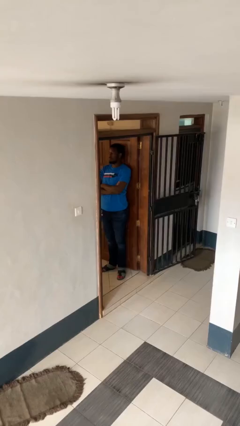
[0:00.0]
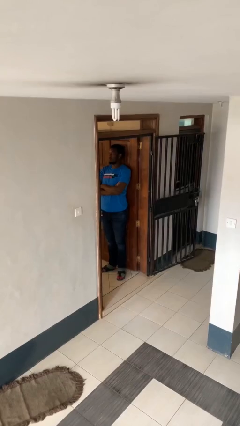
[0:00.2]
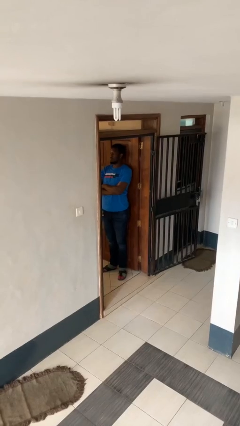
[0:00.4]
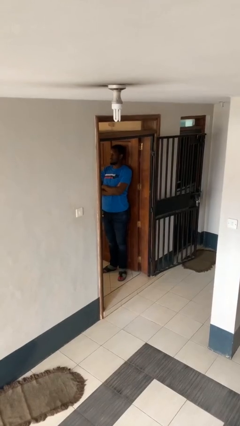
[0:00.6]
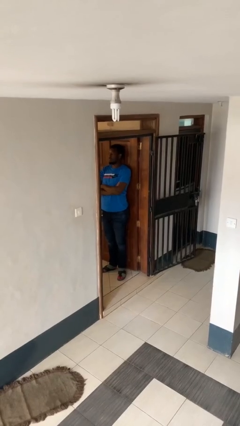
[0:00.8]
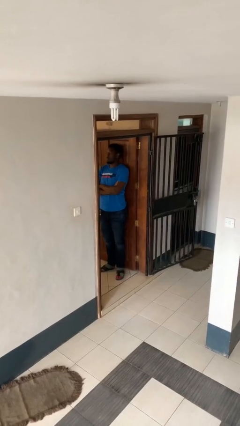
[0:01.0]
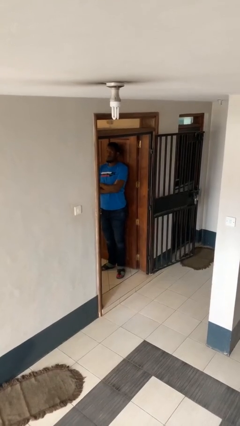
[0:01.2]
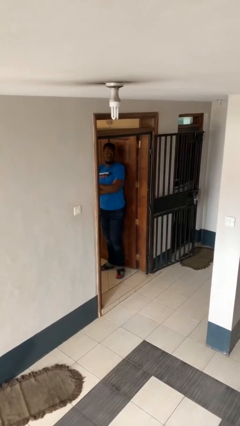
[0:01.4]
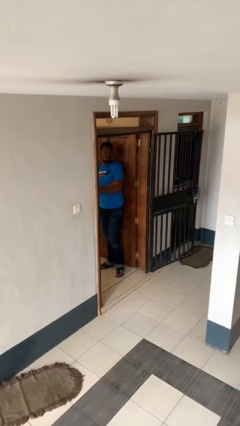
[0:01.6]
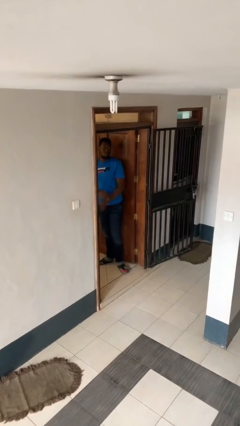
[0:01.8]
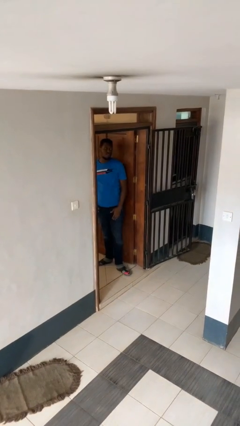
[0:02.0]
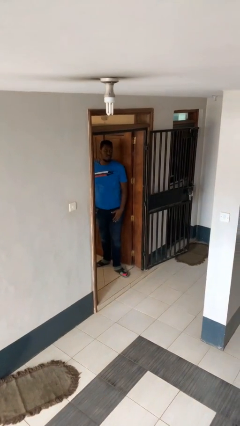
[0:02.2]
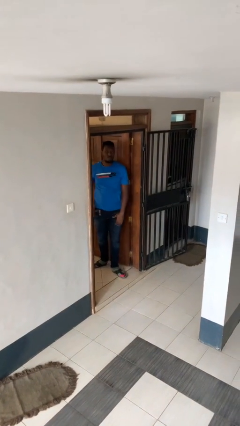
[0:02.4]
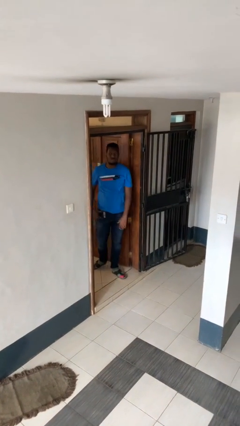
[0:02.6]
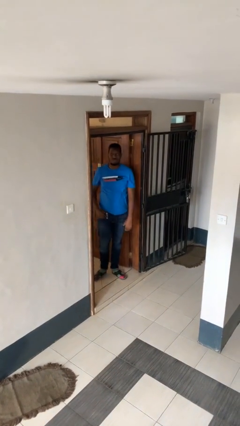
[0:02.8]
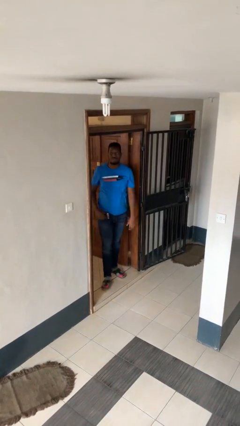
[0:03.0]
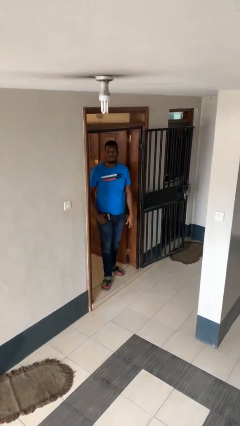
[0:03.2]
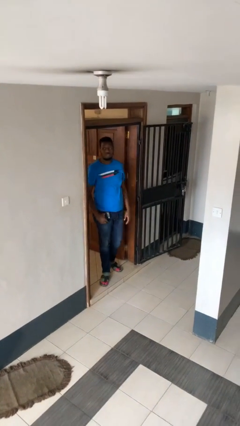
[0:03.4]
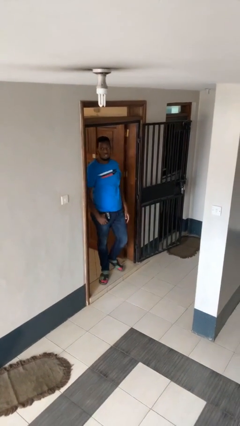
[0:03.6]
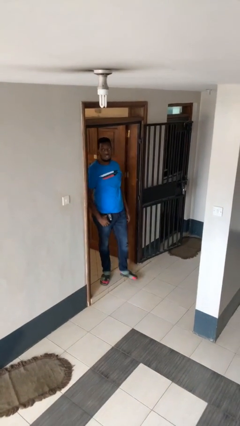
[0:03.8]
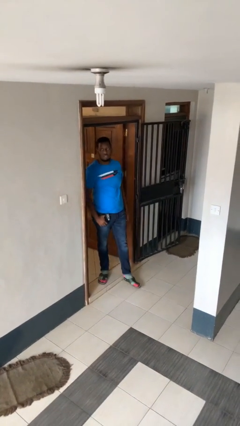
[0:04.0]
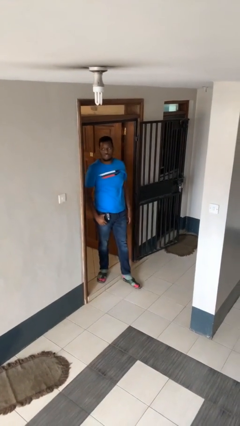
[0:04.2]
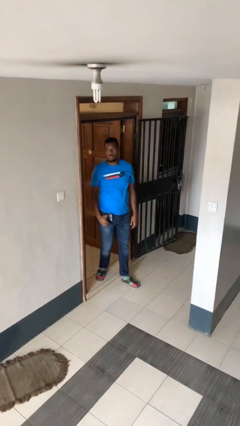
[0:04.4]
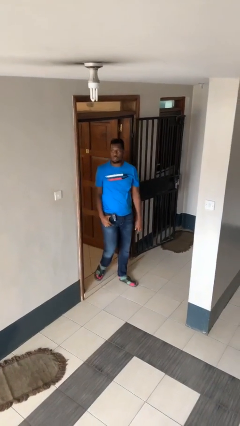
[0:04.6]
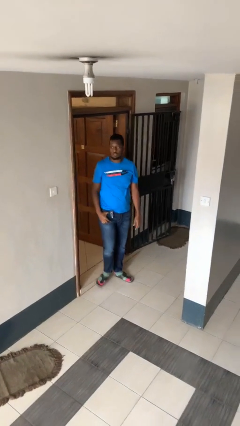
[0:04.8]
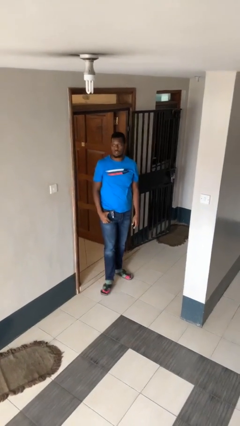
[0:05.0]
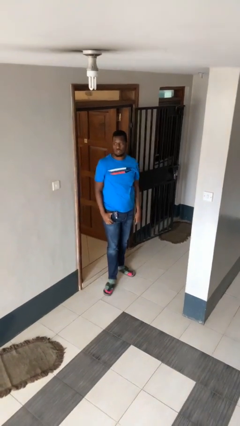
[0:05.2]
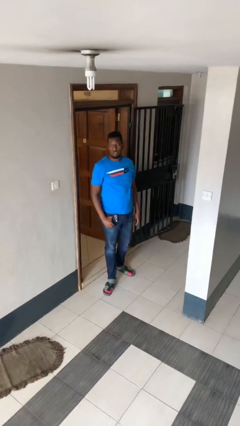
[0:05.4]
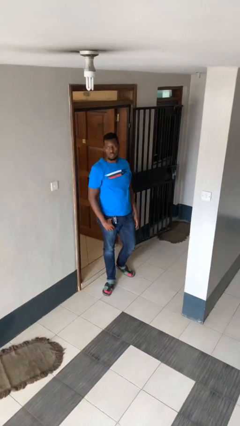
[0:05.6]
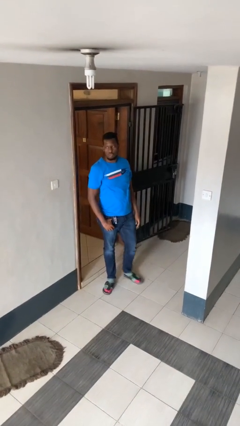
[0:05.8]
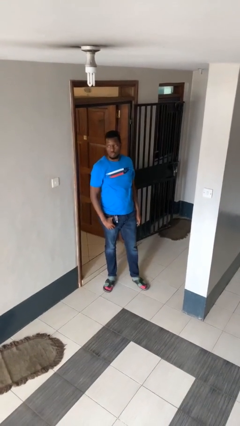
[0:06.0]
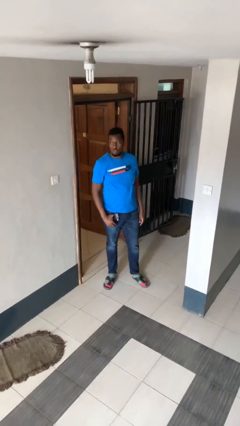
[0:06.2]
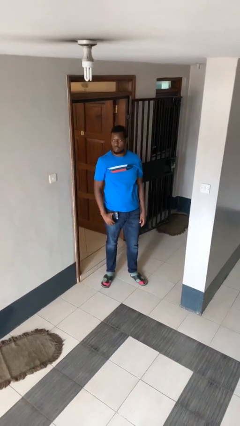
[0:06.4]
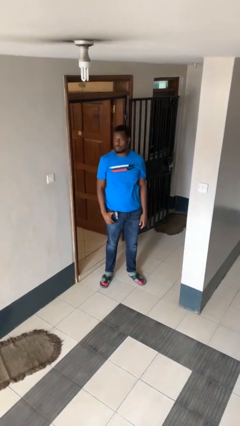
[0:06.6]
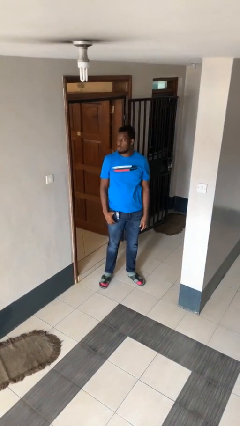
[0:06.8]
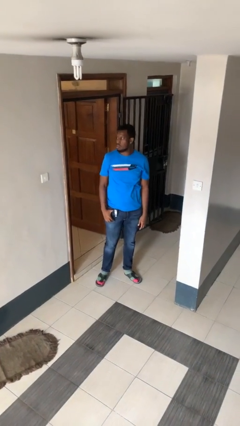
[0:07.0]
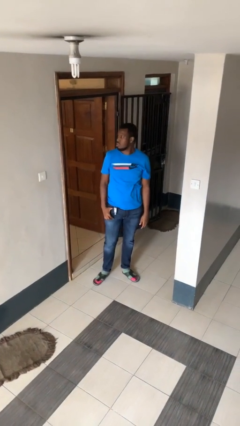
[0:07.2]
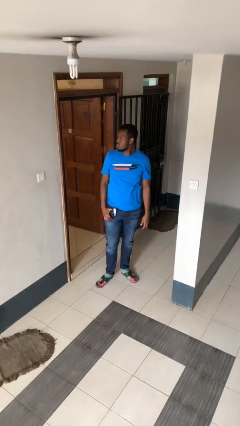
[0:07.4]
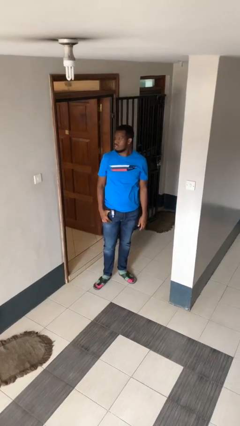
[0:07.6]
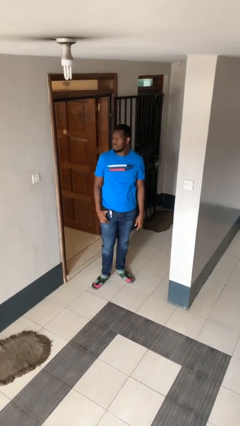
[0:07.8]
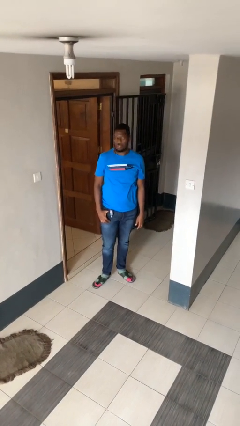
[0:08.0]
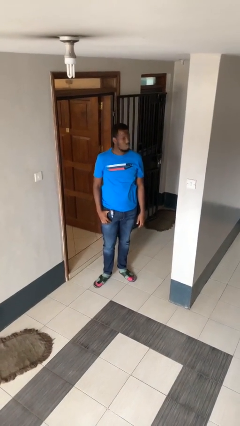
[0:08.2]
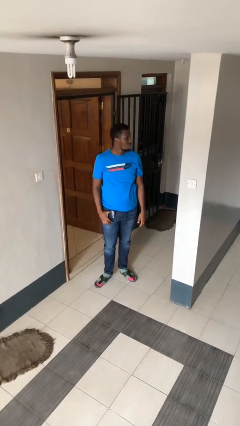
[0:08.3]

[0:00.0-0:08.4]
person enters scene through structure

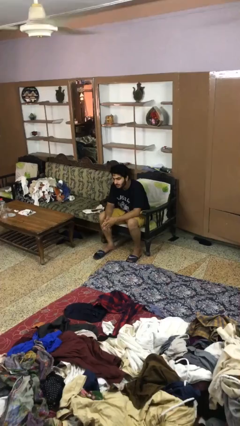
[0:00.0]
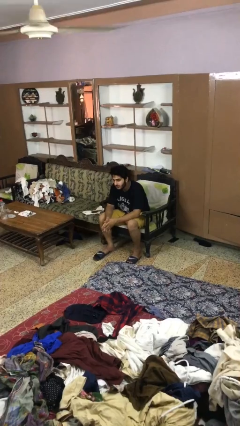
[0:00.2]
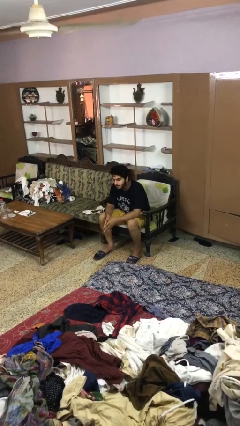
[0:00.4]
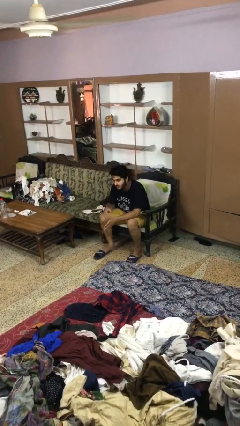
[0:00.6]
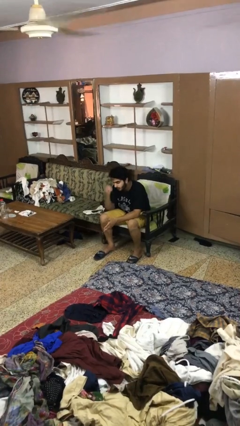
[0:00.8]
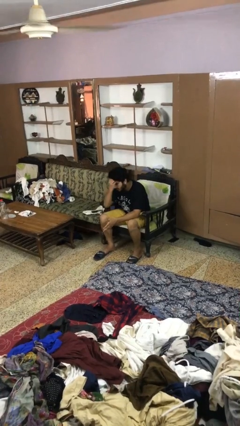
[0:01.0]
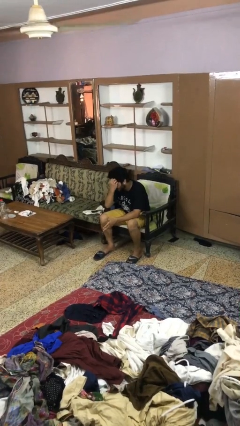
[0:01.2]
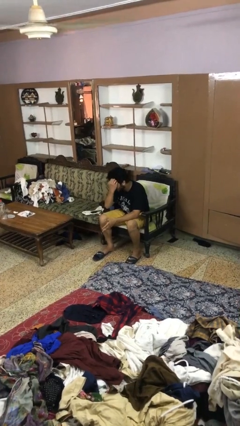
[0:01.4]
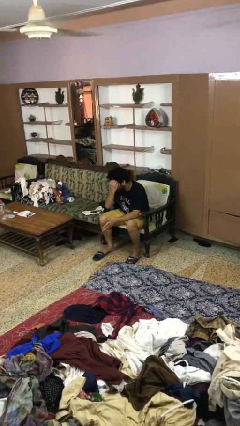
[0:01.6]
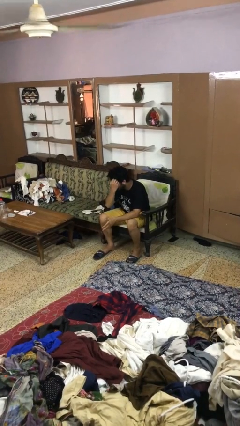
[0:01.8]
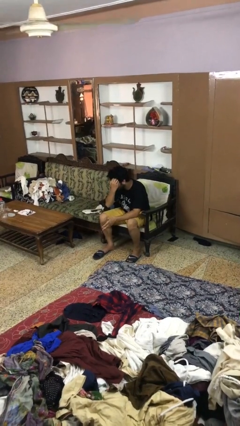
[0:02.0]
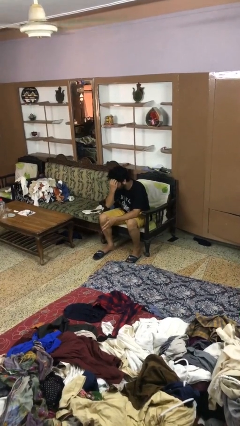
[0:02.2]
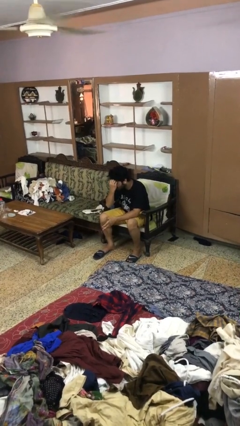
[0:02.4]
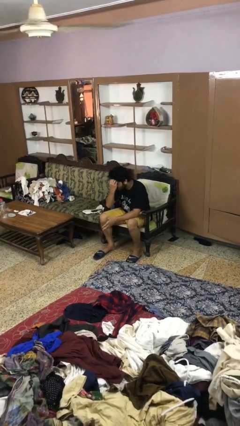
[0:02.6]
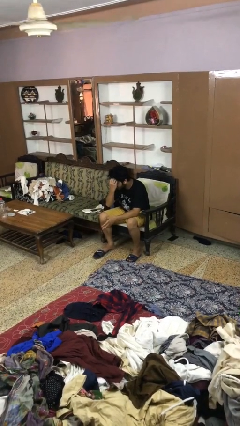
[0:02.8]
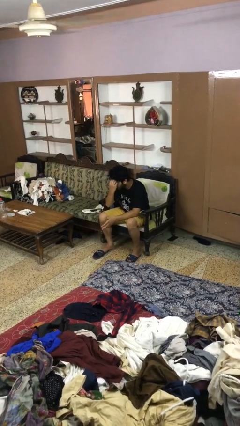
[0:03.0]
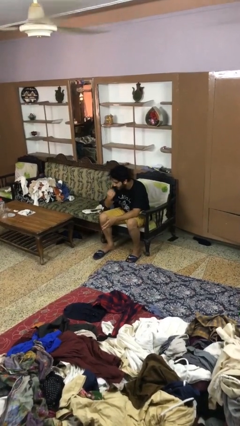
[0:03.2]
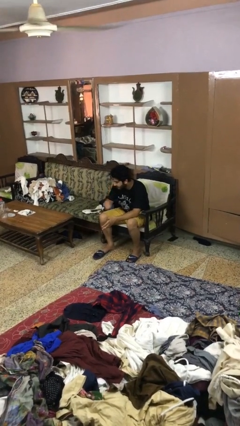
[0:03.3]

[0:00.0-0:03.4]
person scratches face

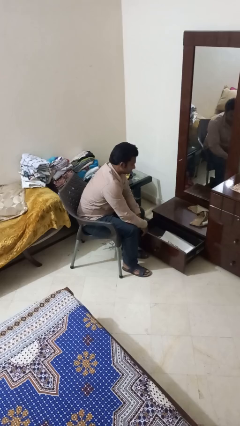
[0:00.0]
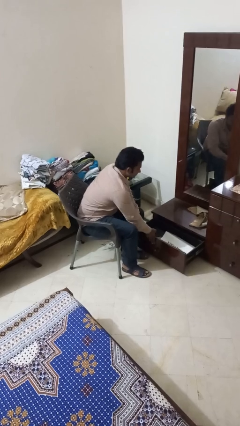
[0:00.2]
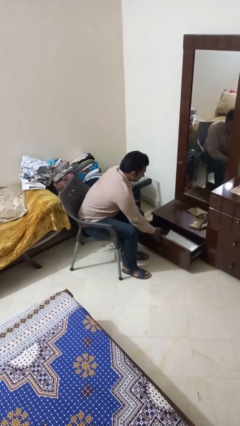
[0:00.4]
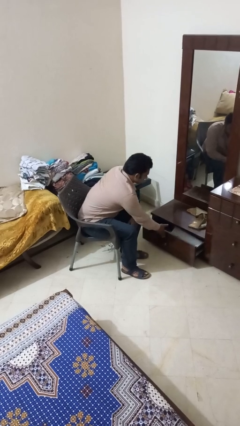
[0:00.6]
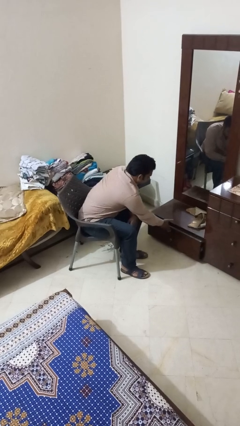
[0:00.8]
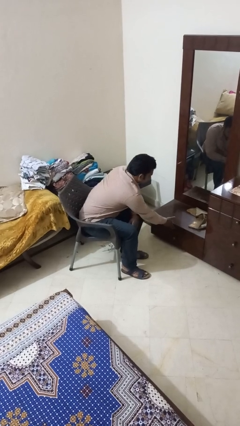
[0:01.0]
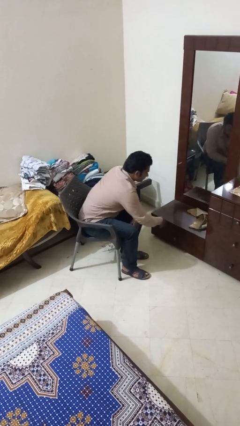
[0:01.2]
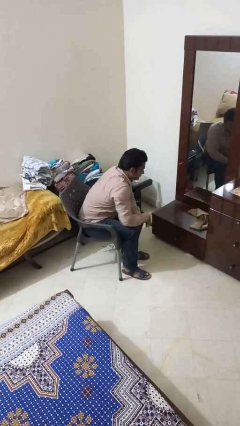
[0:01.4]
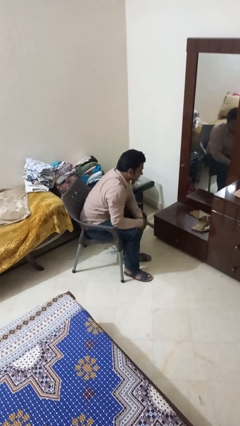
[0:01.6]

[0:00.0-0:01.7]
person closes closet door

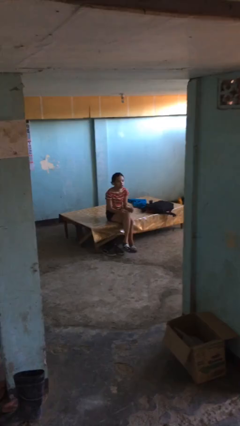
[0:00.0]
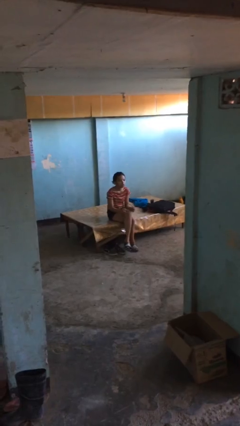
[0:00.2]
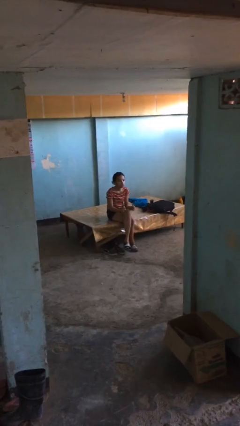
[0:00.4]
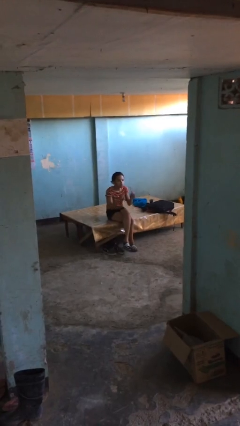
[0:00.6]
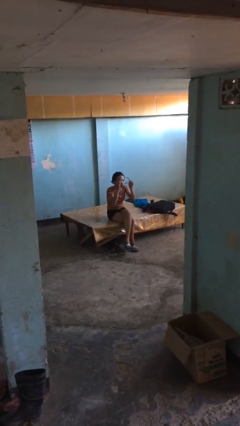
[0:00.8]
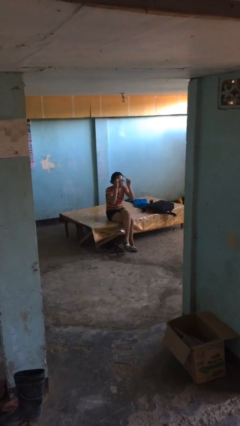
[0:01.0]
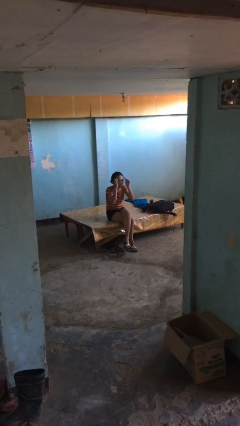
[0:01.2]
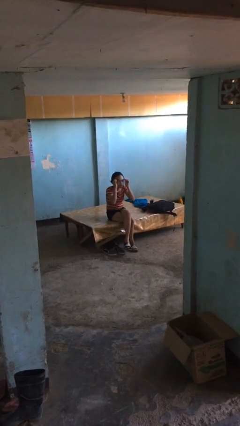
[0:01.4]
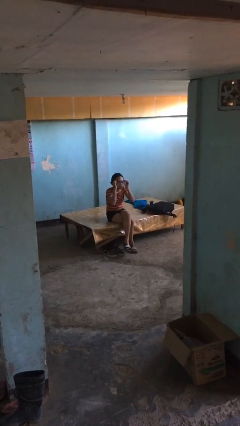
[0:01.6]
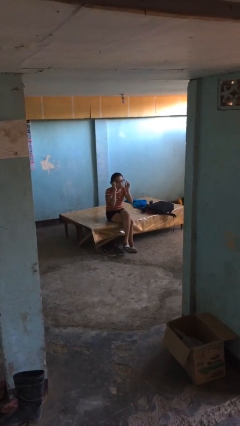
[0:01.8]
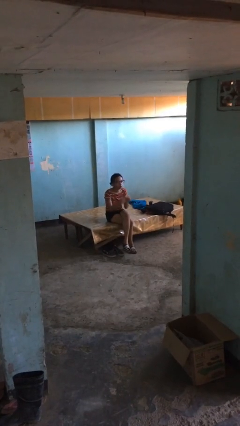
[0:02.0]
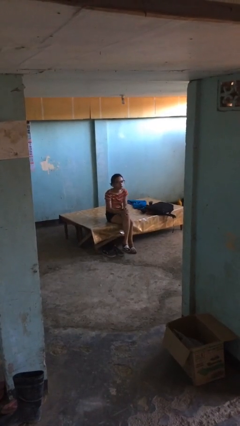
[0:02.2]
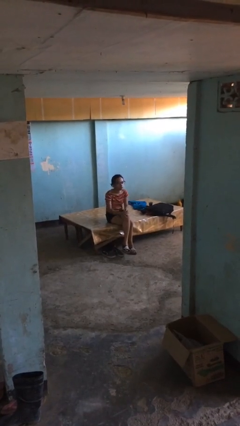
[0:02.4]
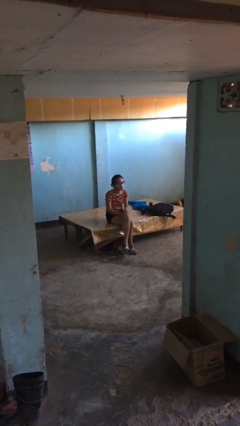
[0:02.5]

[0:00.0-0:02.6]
person puts on glasses

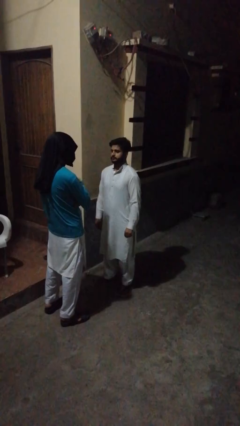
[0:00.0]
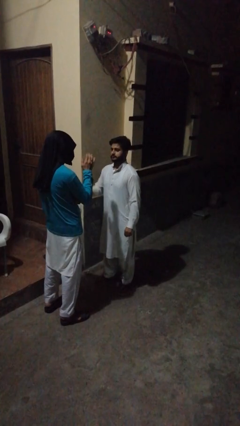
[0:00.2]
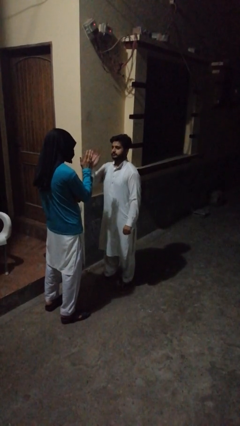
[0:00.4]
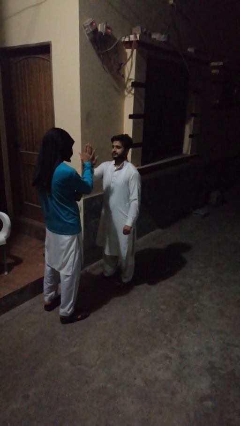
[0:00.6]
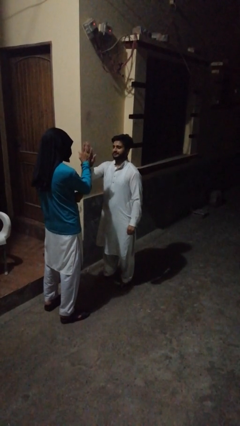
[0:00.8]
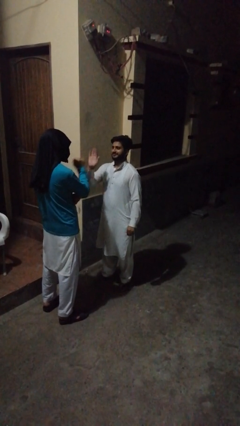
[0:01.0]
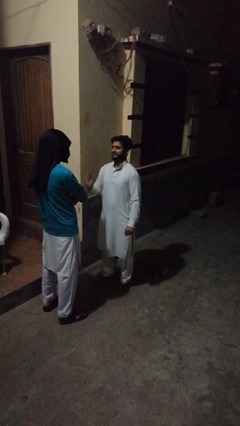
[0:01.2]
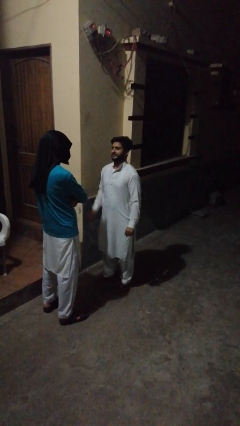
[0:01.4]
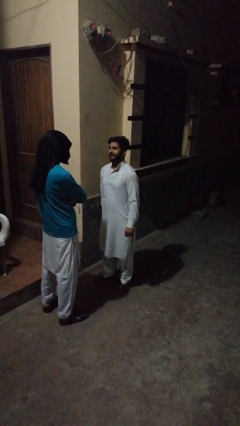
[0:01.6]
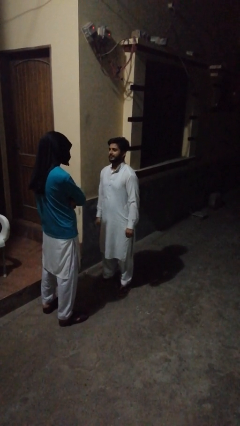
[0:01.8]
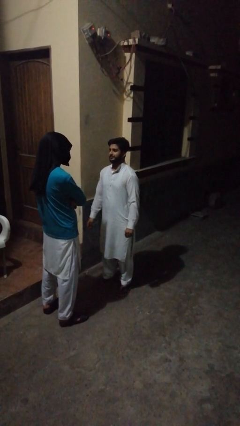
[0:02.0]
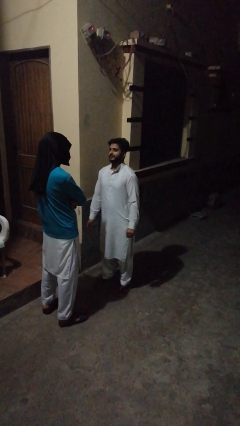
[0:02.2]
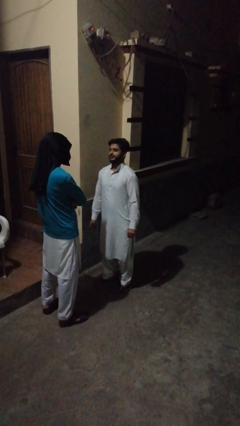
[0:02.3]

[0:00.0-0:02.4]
person highfives hand
